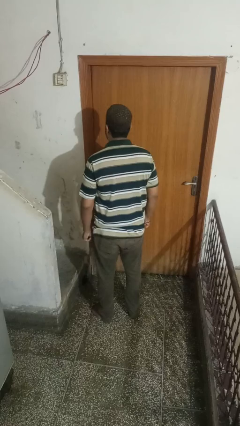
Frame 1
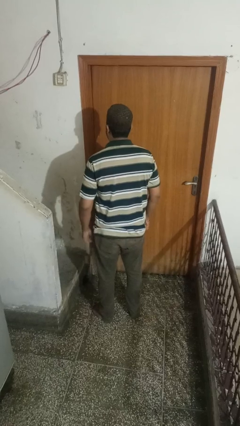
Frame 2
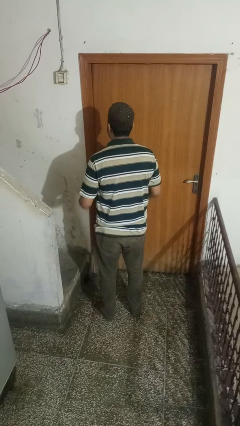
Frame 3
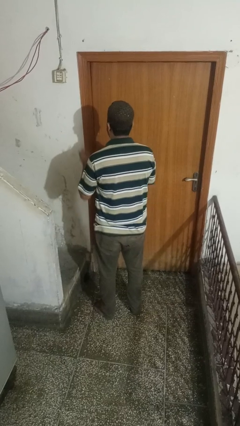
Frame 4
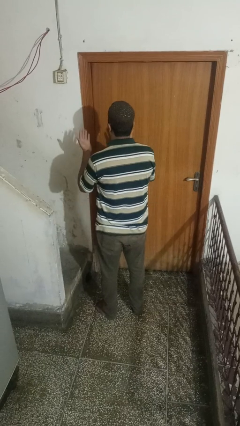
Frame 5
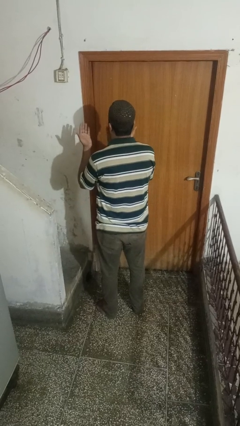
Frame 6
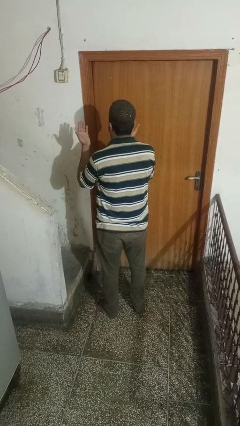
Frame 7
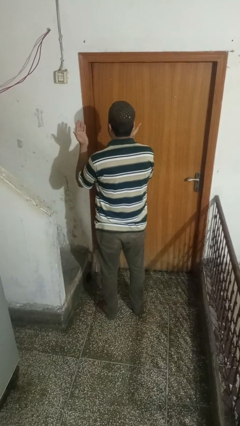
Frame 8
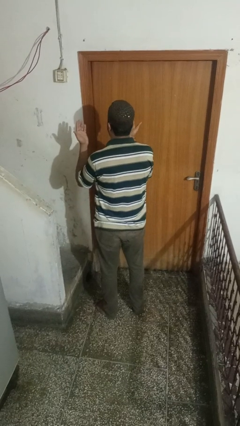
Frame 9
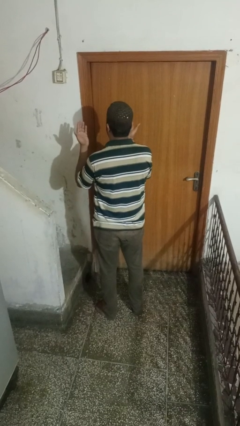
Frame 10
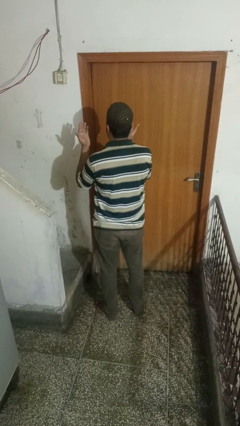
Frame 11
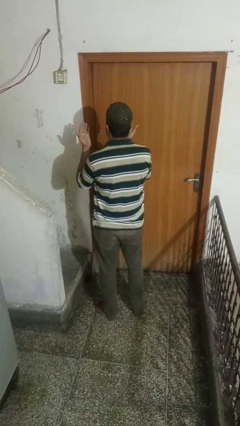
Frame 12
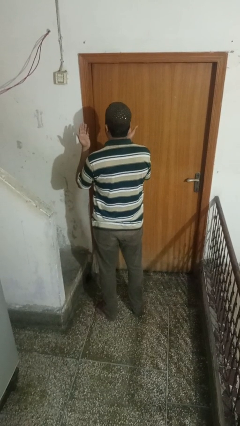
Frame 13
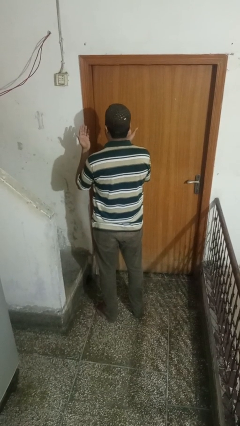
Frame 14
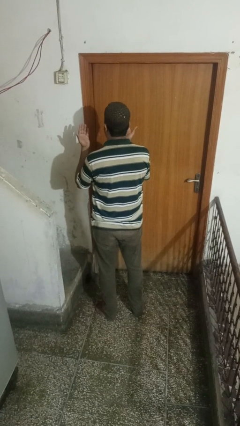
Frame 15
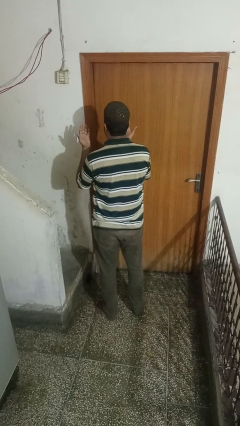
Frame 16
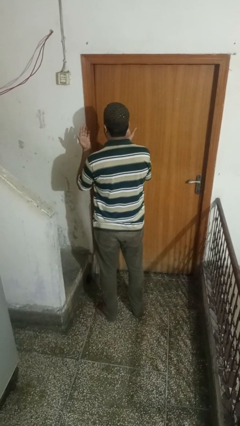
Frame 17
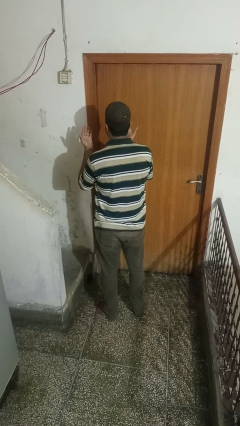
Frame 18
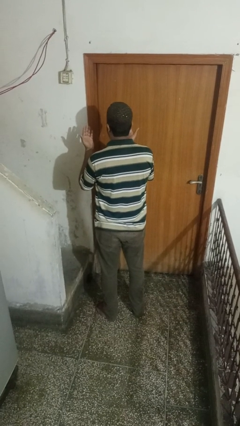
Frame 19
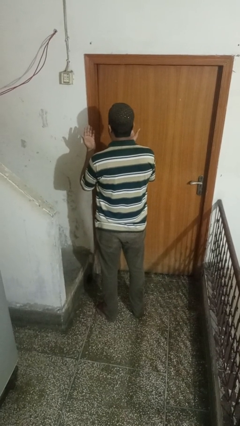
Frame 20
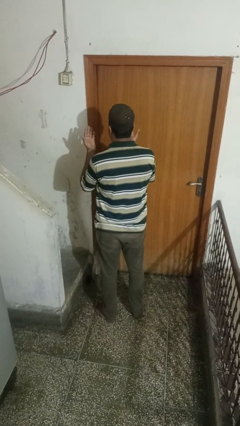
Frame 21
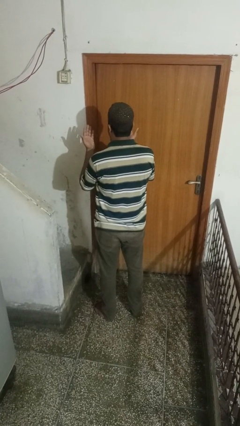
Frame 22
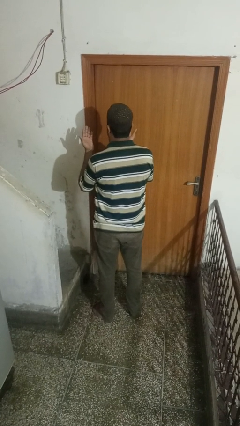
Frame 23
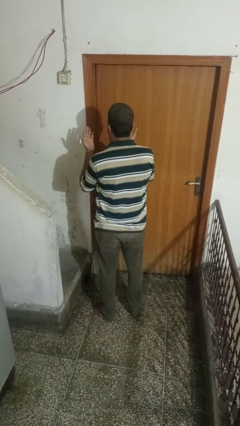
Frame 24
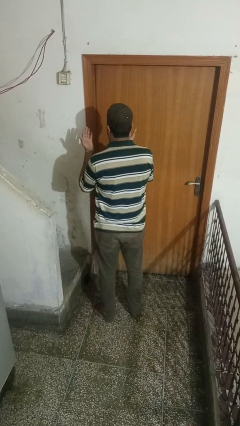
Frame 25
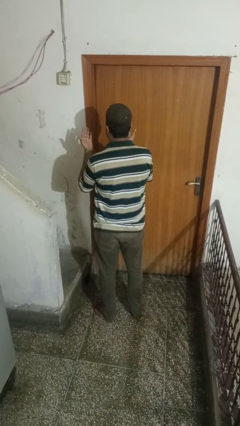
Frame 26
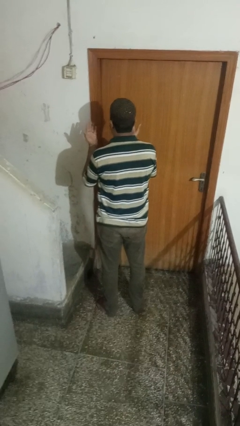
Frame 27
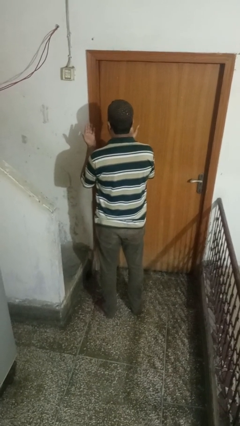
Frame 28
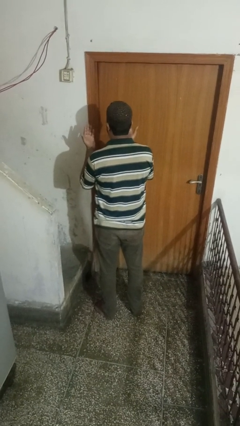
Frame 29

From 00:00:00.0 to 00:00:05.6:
person prays

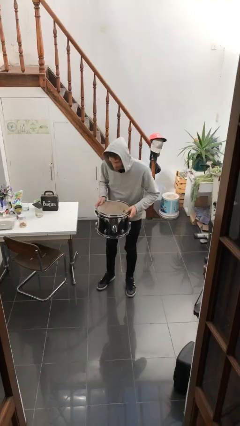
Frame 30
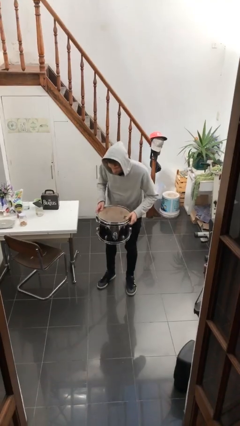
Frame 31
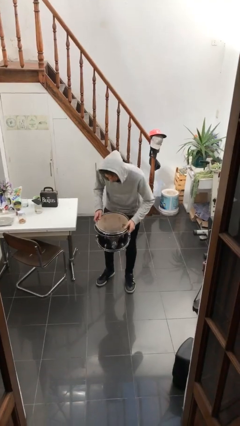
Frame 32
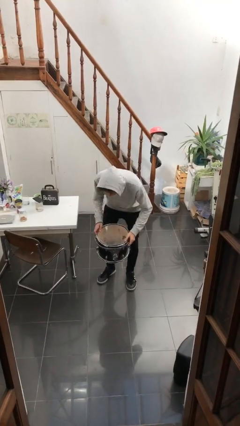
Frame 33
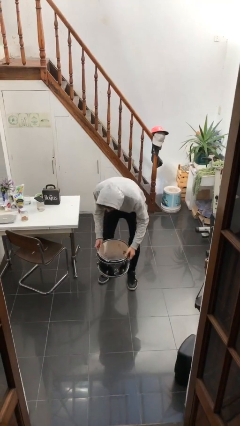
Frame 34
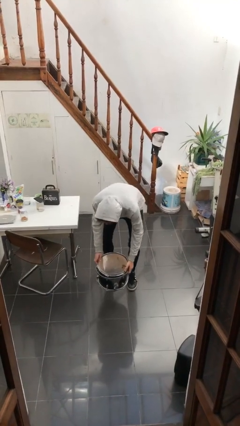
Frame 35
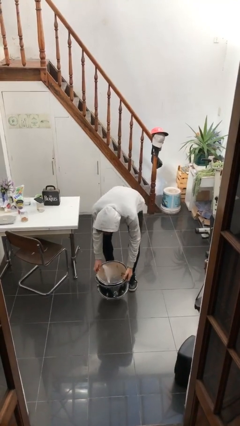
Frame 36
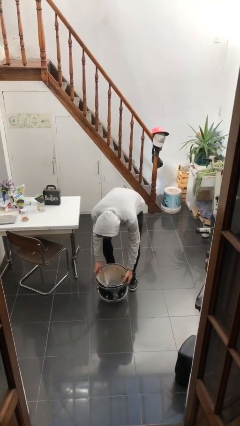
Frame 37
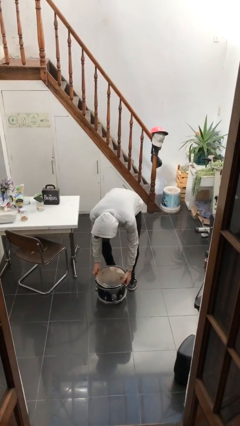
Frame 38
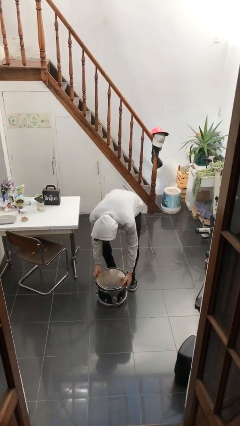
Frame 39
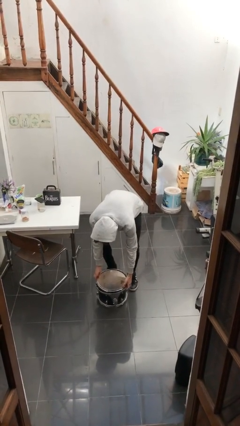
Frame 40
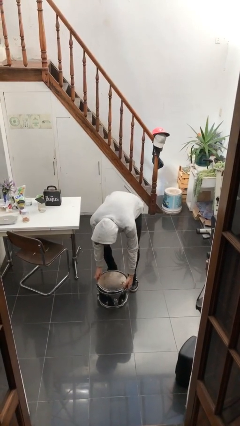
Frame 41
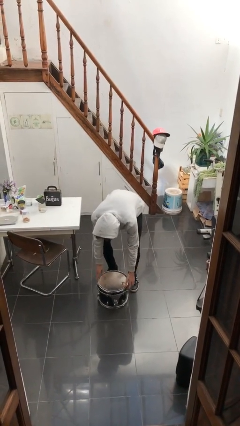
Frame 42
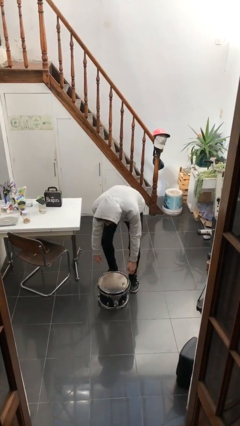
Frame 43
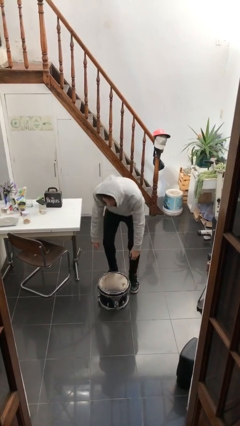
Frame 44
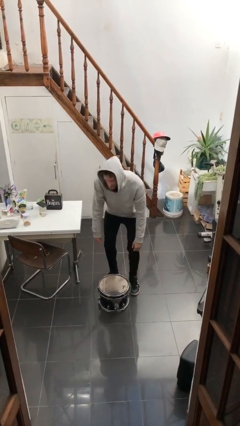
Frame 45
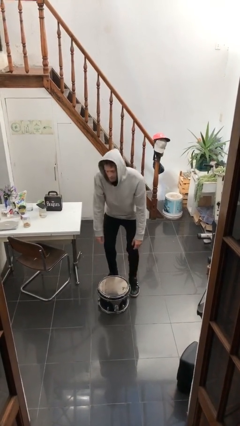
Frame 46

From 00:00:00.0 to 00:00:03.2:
person puts down object on floor

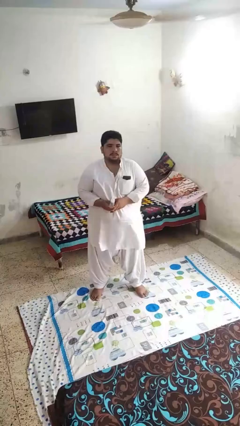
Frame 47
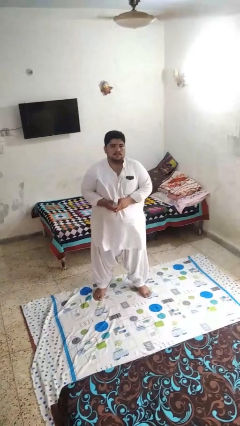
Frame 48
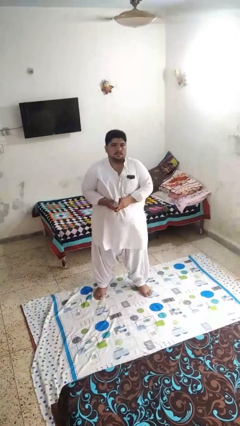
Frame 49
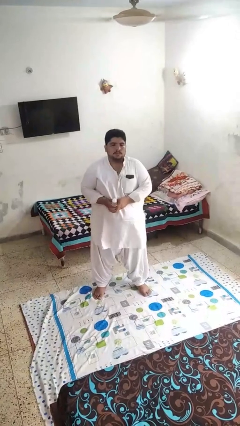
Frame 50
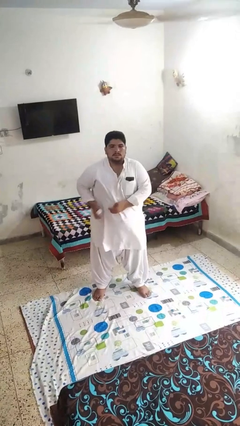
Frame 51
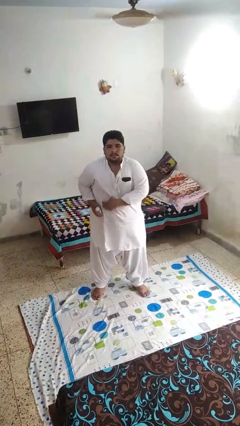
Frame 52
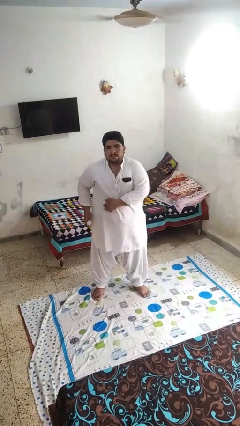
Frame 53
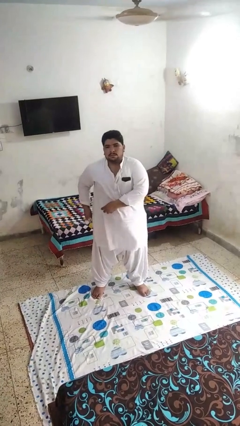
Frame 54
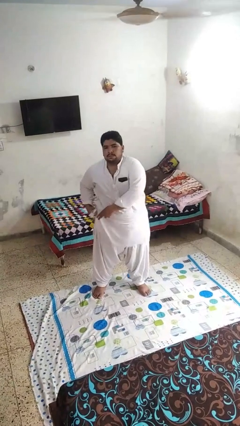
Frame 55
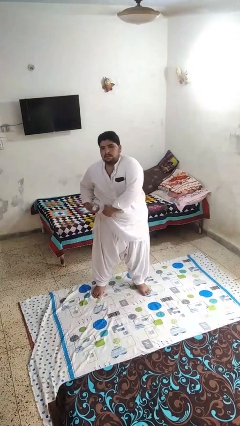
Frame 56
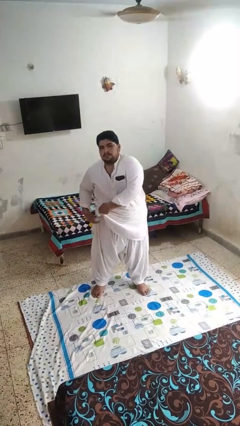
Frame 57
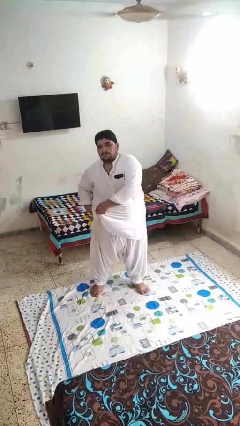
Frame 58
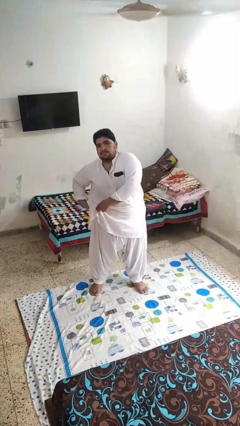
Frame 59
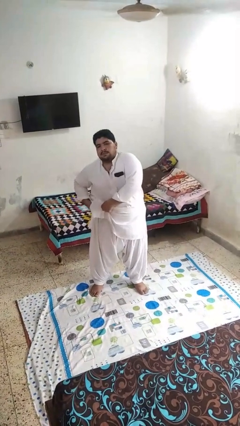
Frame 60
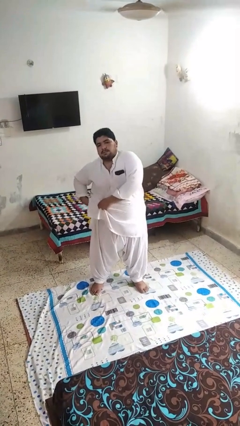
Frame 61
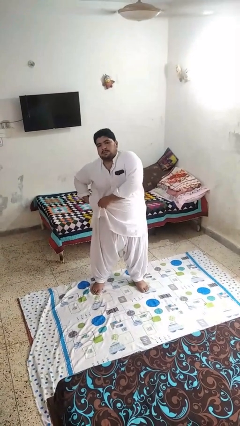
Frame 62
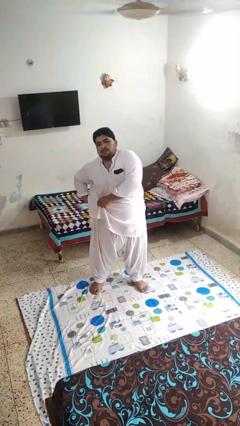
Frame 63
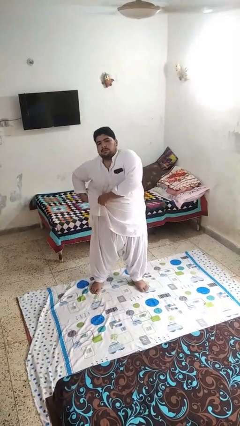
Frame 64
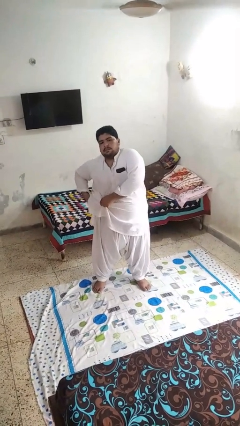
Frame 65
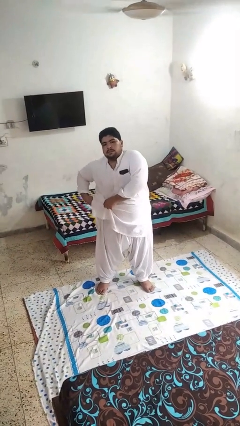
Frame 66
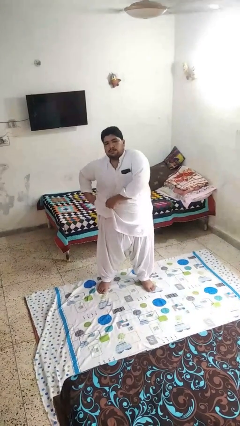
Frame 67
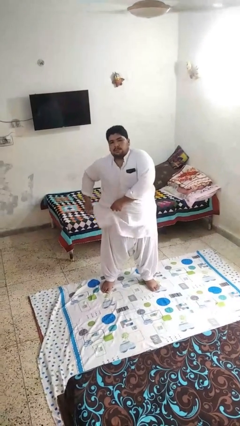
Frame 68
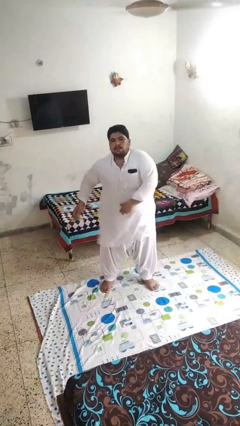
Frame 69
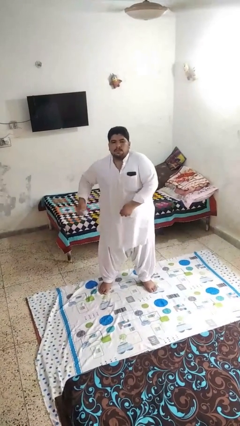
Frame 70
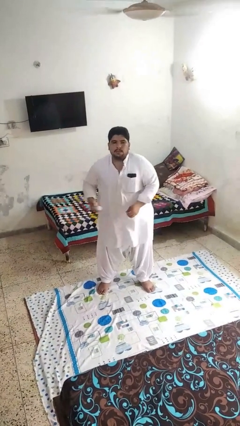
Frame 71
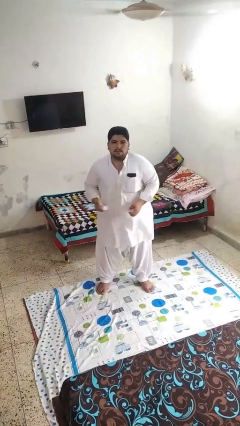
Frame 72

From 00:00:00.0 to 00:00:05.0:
person applies deodorant

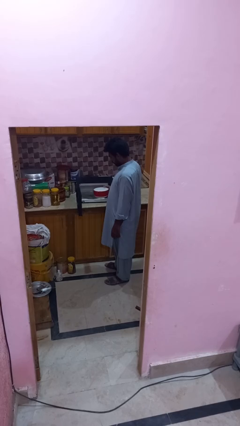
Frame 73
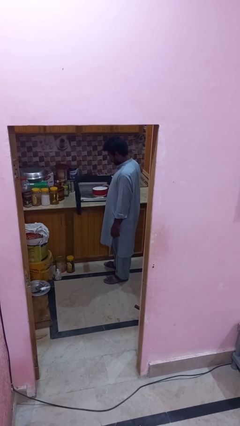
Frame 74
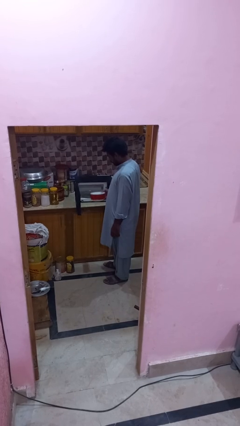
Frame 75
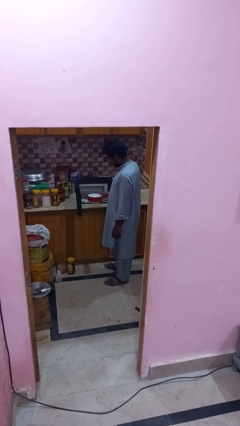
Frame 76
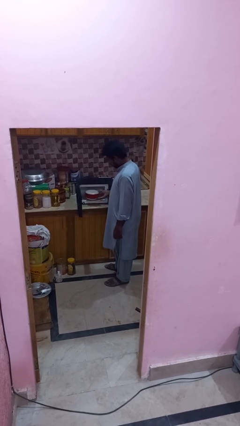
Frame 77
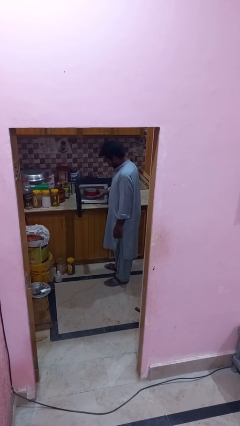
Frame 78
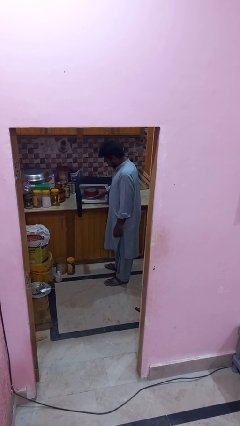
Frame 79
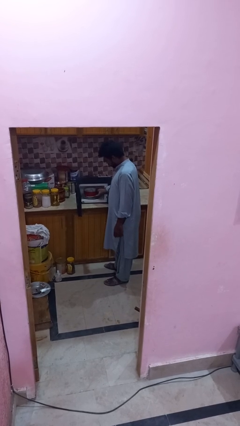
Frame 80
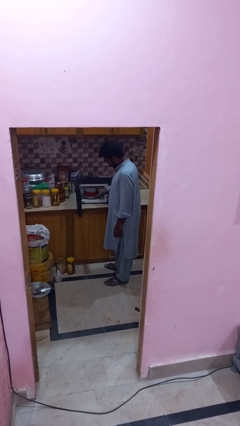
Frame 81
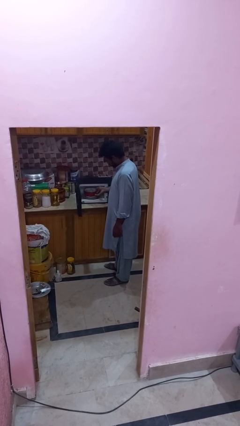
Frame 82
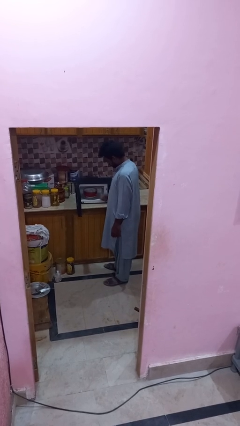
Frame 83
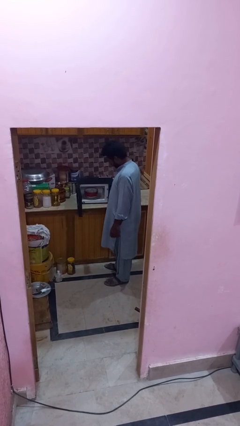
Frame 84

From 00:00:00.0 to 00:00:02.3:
person puts object into microwave

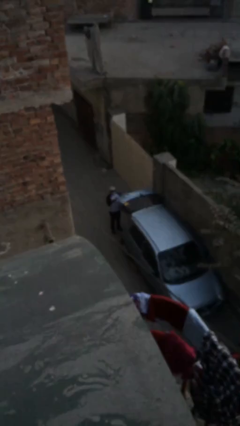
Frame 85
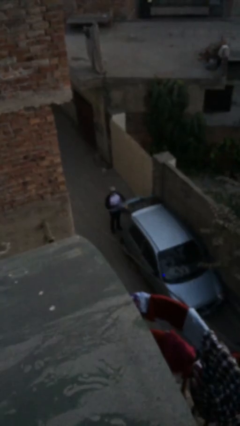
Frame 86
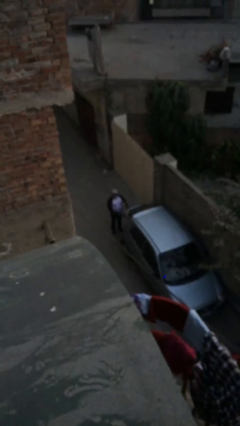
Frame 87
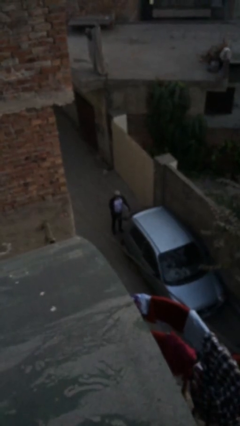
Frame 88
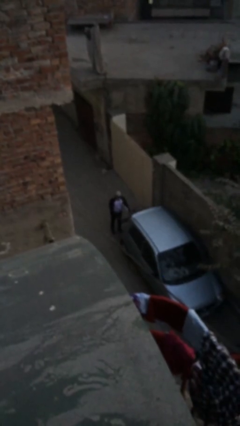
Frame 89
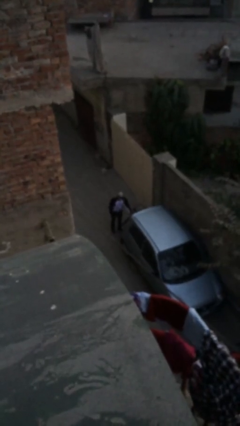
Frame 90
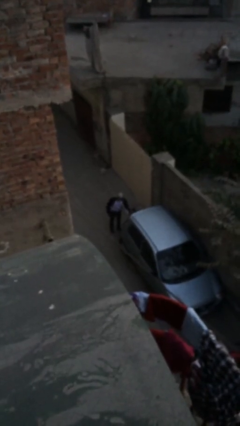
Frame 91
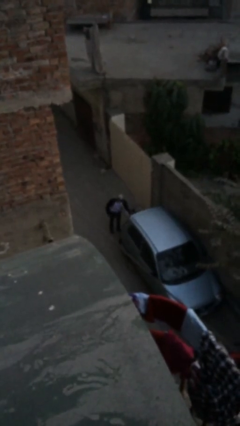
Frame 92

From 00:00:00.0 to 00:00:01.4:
person closes car trunk

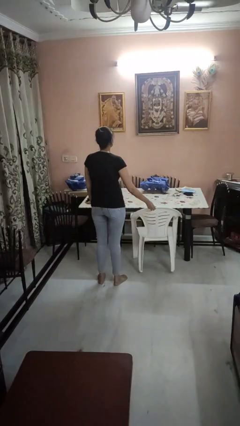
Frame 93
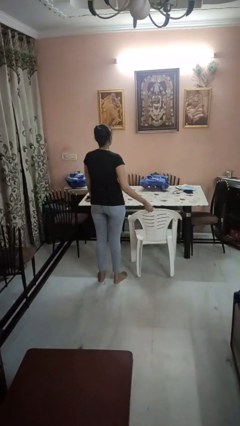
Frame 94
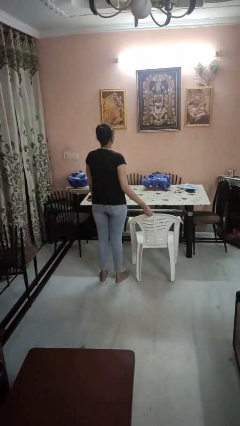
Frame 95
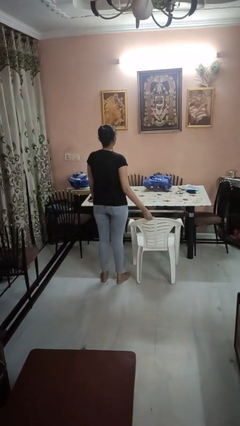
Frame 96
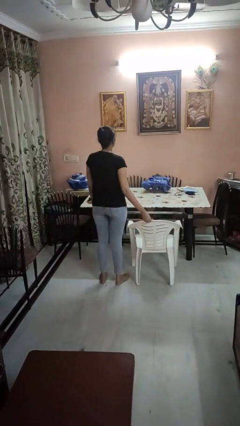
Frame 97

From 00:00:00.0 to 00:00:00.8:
person pulls out chair
